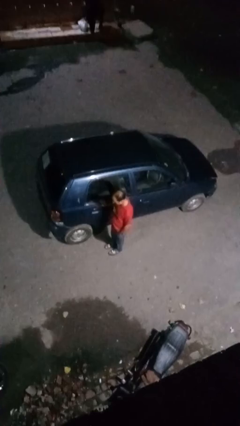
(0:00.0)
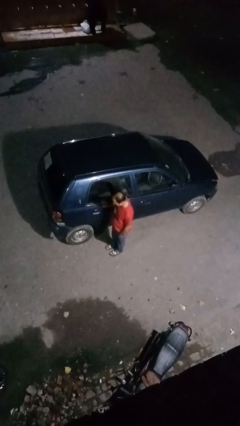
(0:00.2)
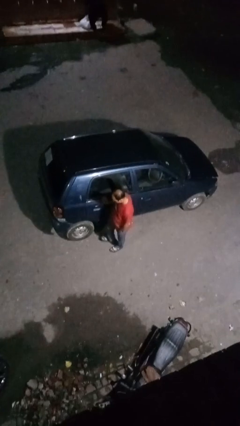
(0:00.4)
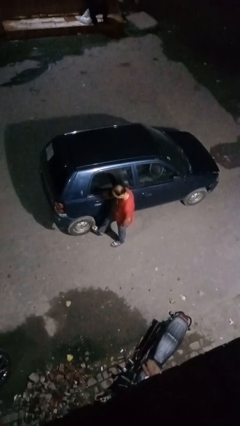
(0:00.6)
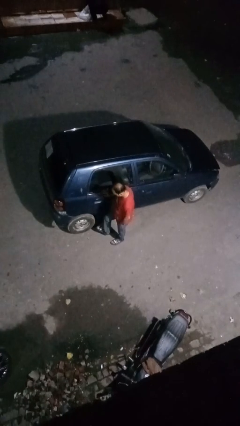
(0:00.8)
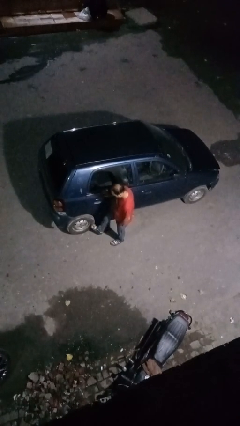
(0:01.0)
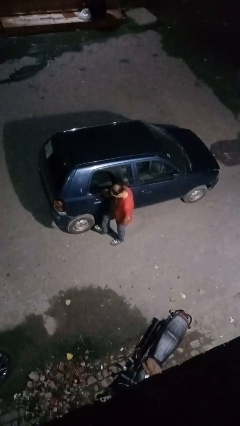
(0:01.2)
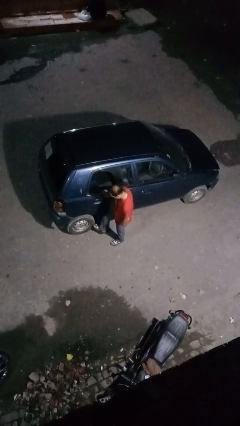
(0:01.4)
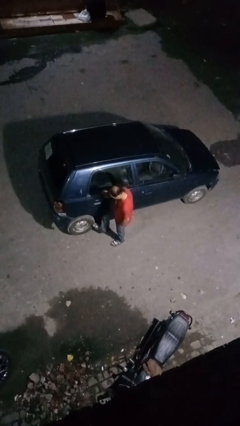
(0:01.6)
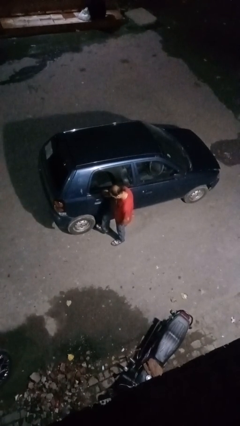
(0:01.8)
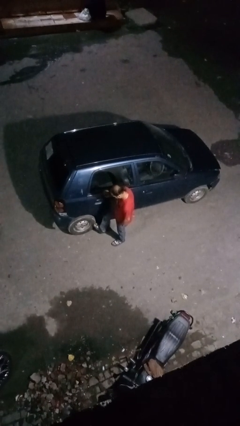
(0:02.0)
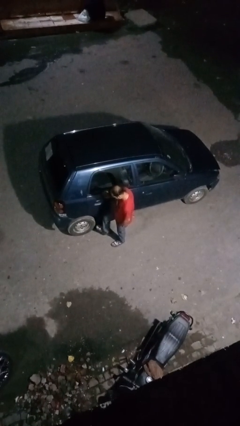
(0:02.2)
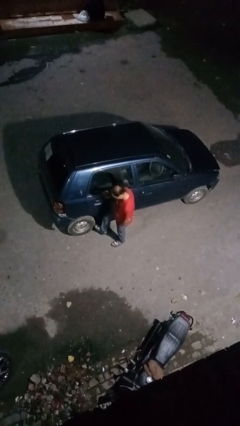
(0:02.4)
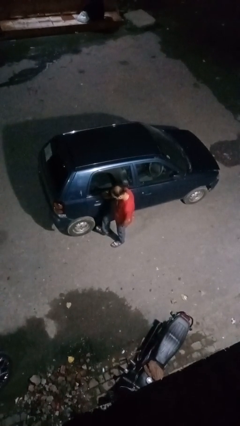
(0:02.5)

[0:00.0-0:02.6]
person kicks car tires

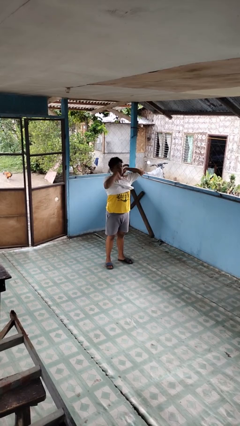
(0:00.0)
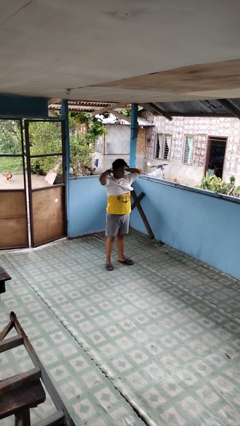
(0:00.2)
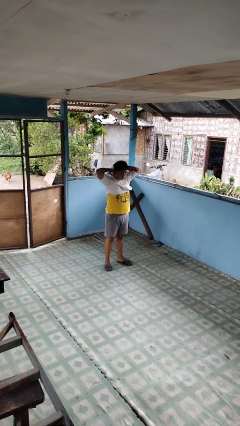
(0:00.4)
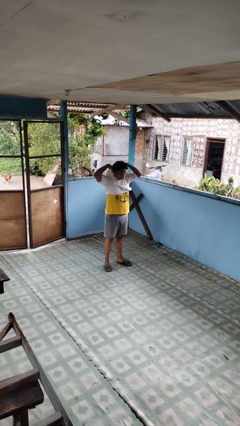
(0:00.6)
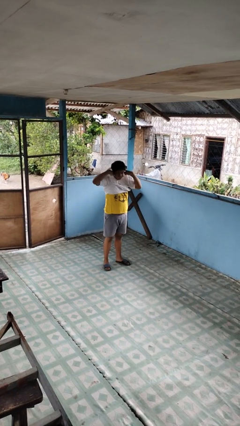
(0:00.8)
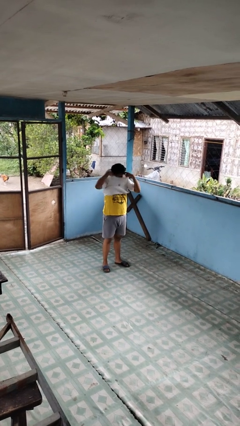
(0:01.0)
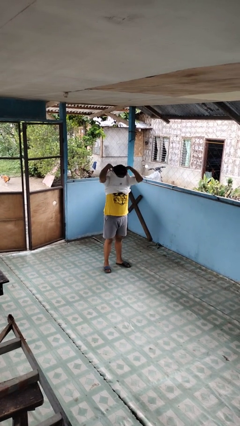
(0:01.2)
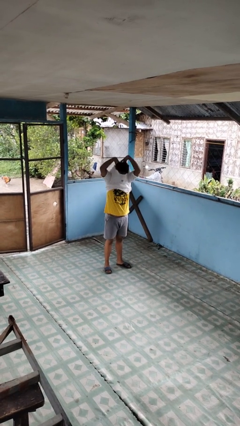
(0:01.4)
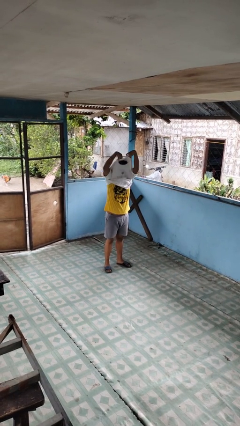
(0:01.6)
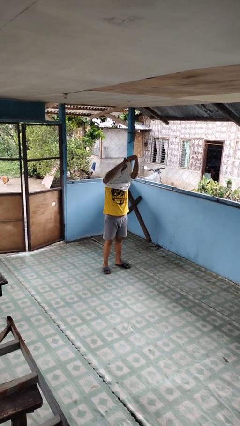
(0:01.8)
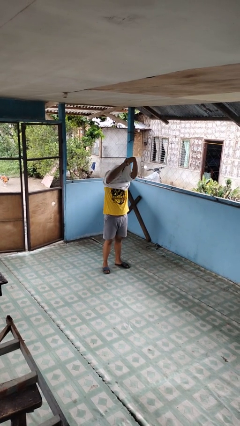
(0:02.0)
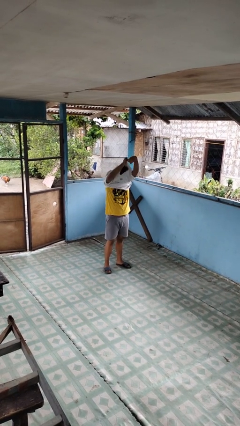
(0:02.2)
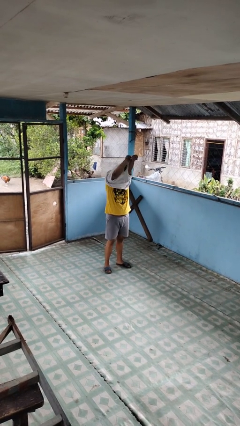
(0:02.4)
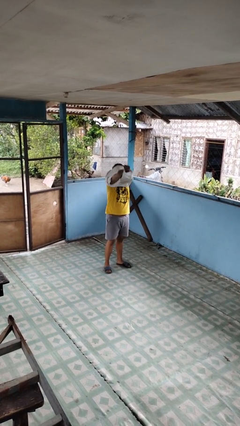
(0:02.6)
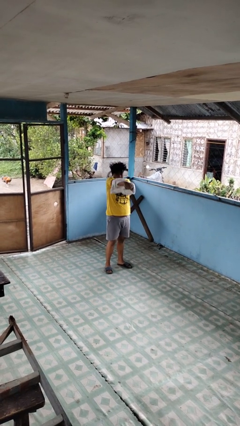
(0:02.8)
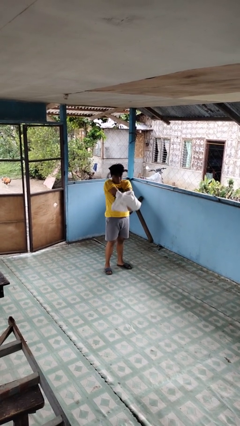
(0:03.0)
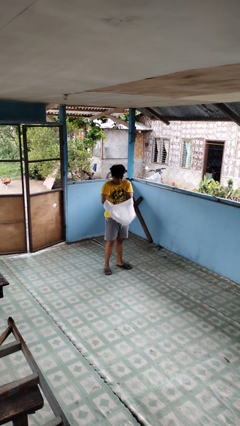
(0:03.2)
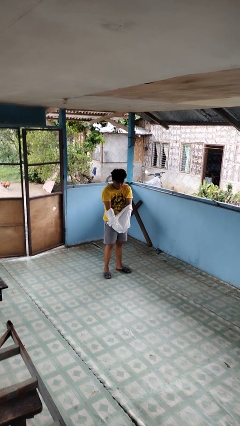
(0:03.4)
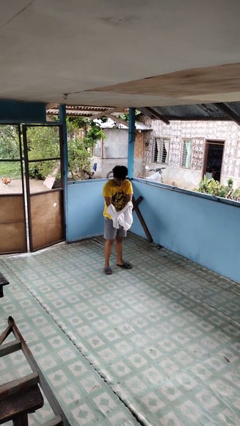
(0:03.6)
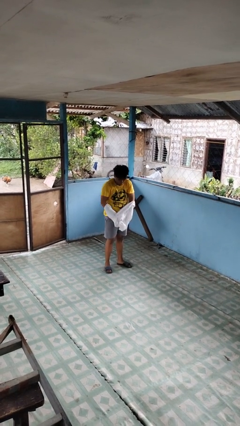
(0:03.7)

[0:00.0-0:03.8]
person takes off shirt

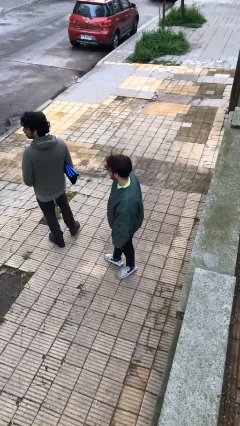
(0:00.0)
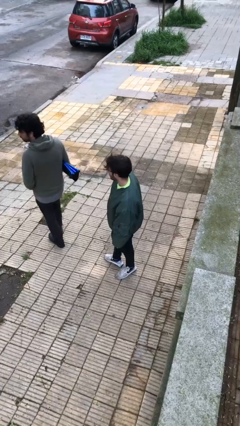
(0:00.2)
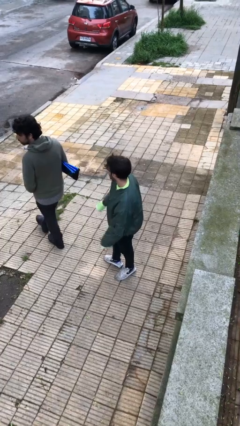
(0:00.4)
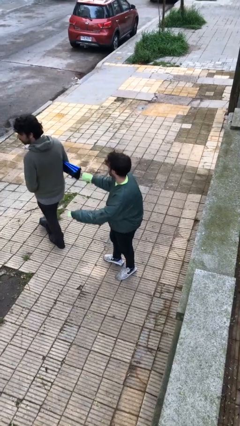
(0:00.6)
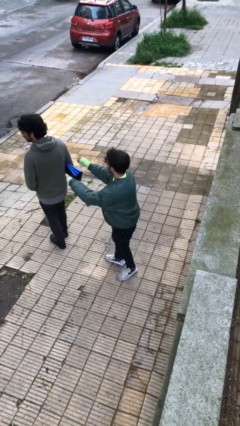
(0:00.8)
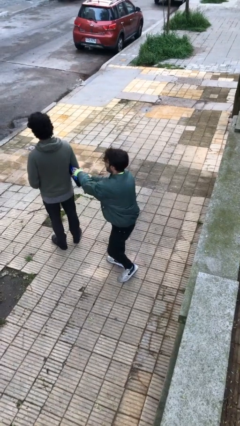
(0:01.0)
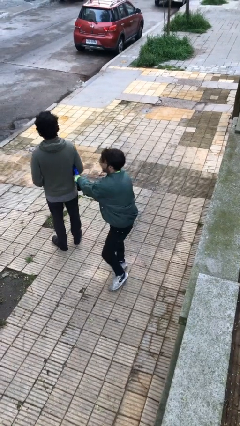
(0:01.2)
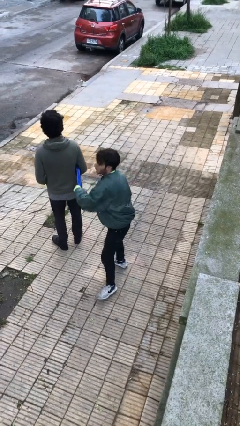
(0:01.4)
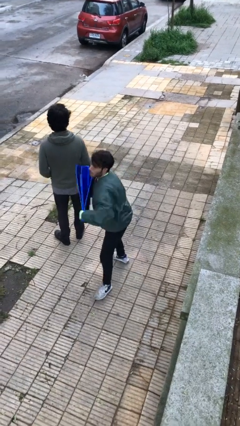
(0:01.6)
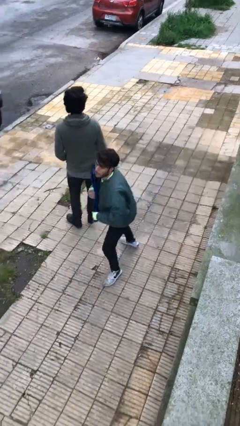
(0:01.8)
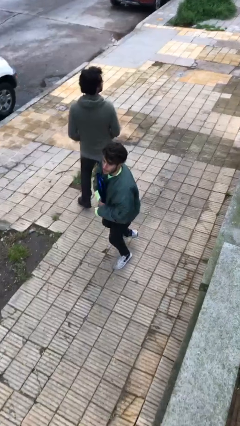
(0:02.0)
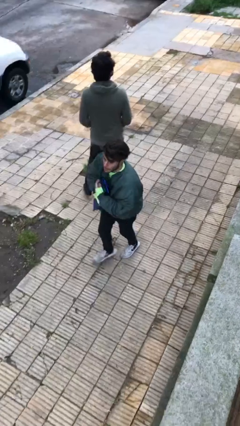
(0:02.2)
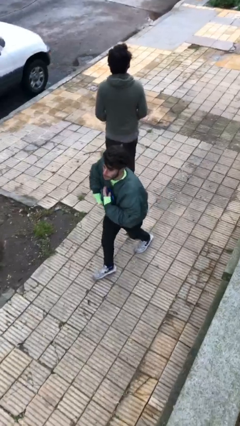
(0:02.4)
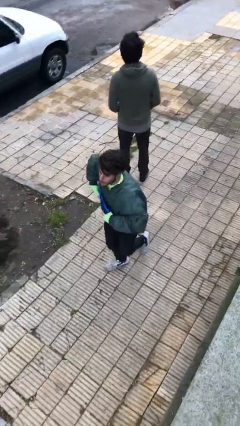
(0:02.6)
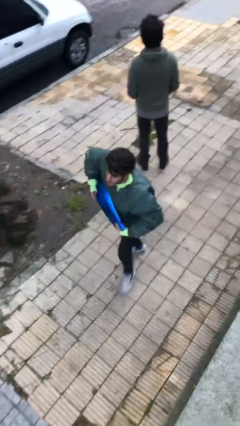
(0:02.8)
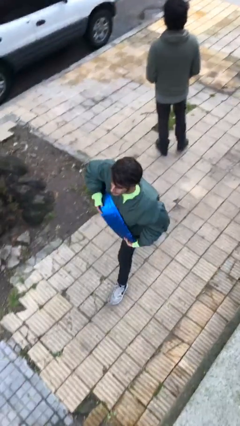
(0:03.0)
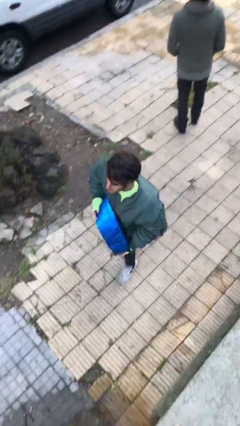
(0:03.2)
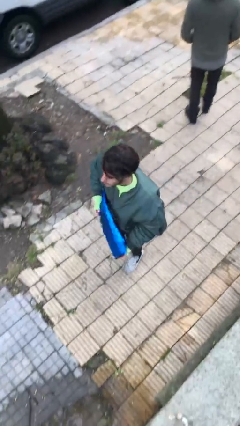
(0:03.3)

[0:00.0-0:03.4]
person steals object from person

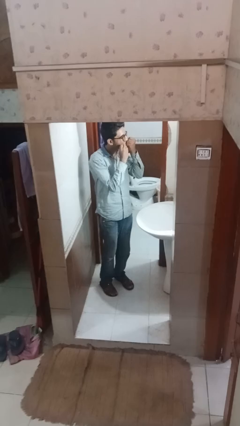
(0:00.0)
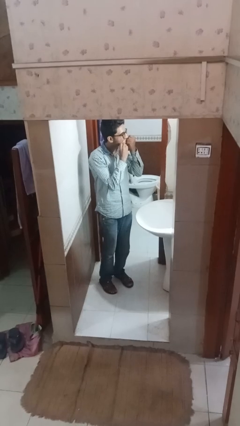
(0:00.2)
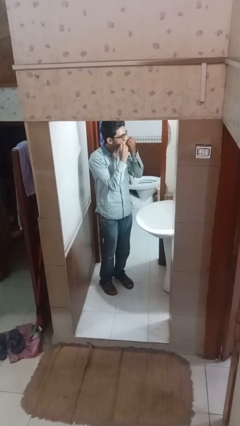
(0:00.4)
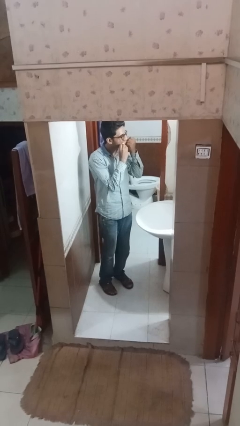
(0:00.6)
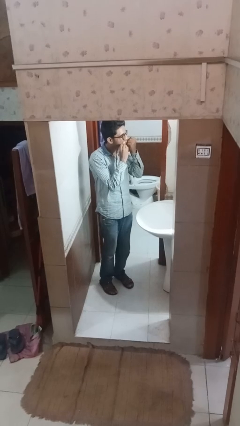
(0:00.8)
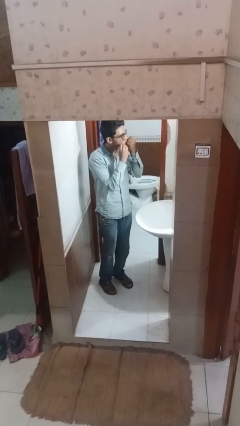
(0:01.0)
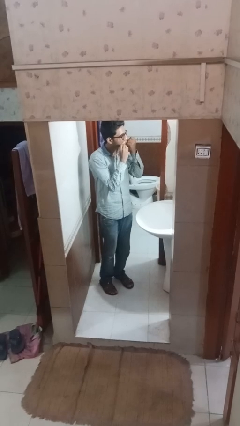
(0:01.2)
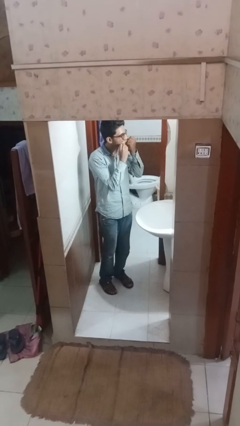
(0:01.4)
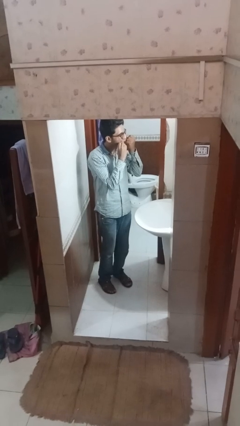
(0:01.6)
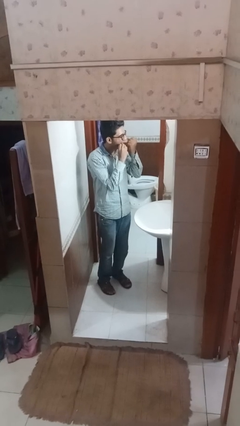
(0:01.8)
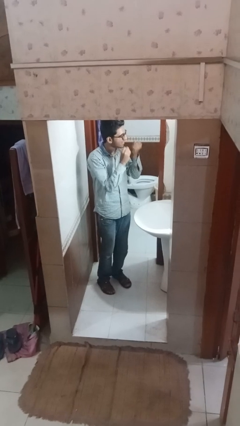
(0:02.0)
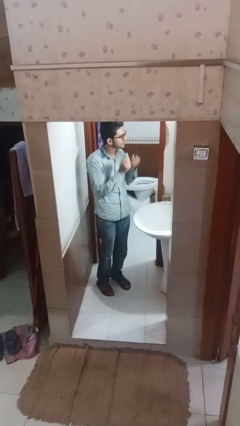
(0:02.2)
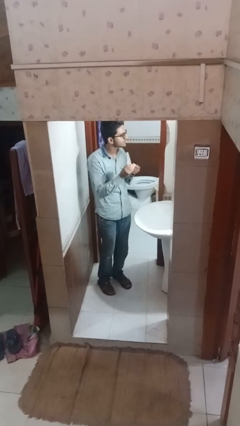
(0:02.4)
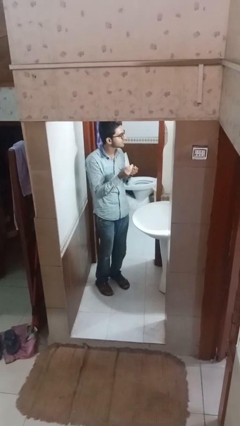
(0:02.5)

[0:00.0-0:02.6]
person flosses

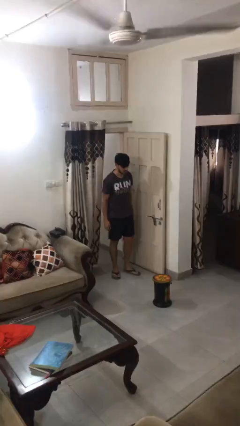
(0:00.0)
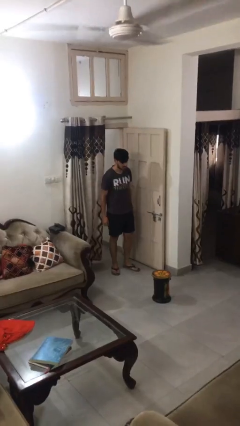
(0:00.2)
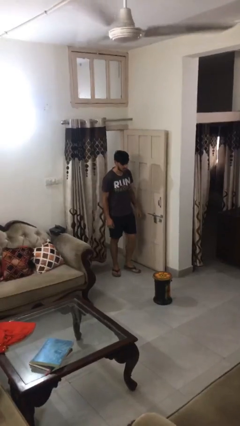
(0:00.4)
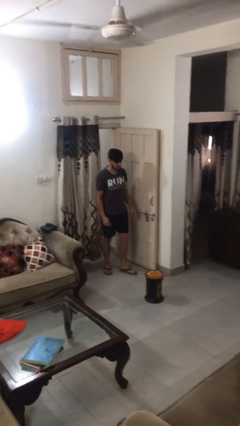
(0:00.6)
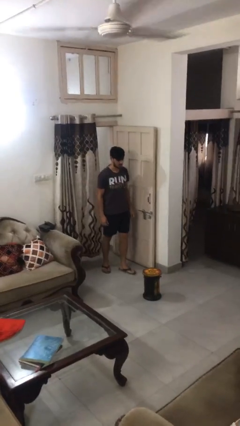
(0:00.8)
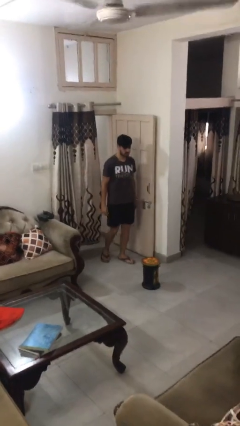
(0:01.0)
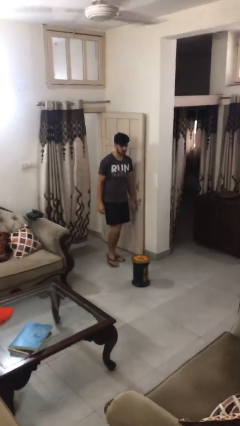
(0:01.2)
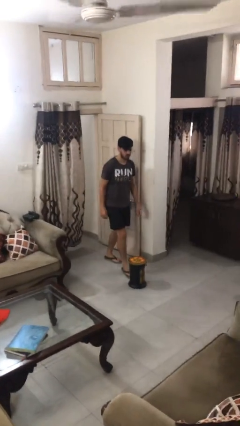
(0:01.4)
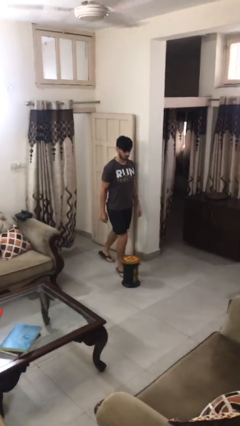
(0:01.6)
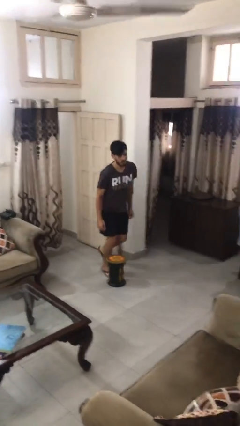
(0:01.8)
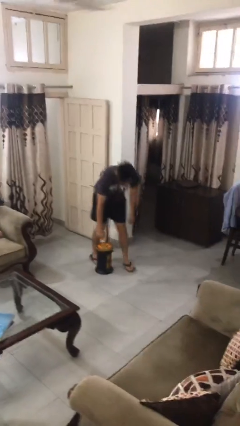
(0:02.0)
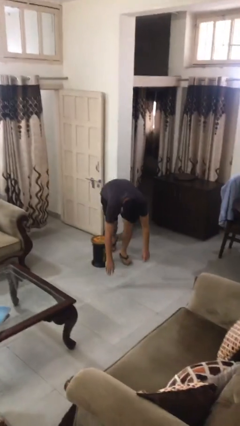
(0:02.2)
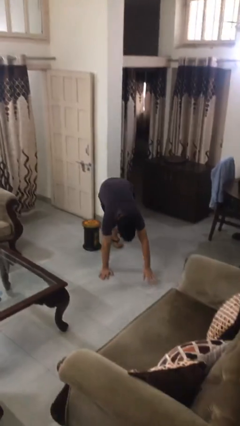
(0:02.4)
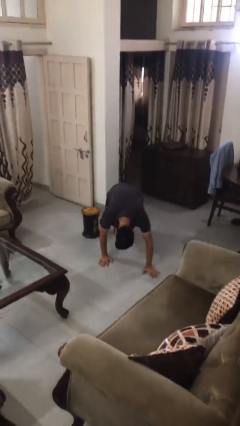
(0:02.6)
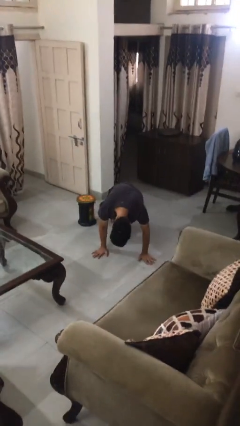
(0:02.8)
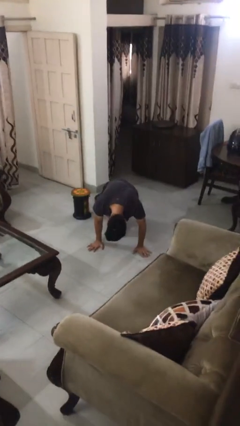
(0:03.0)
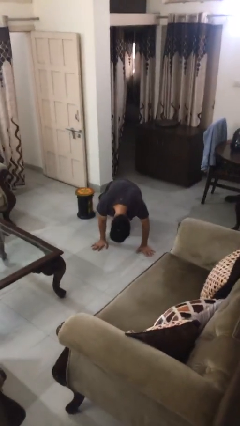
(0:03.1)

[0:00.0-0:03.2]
person trips on object on floor

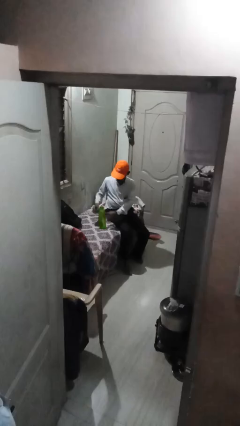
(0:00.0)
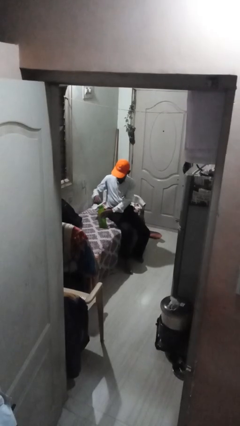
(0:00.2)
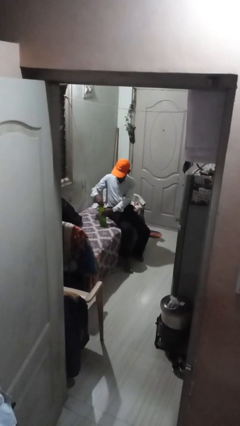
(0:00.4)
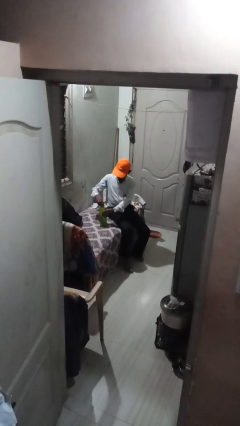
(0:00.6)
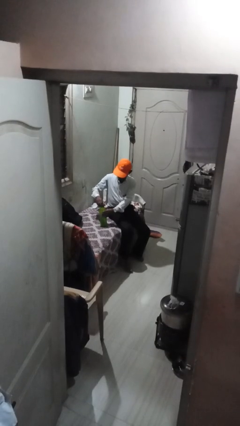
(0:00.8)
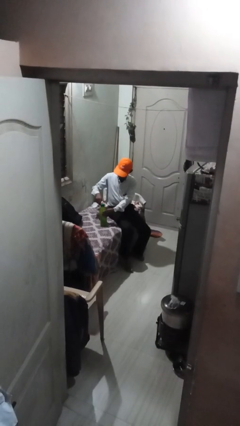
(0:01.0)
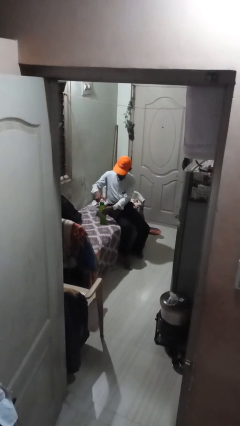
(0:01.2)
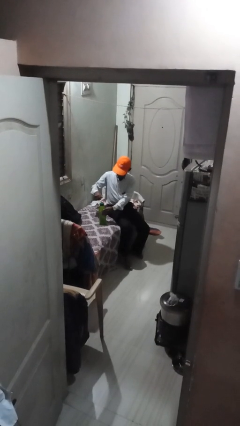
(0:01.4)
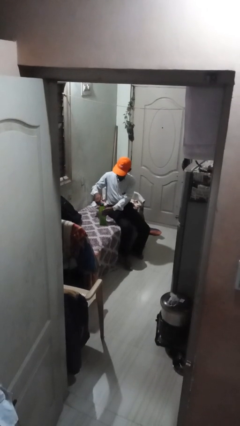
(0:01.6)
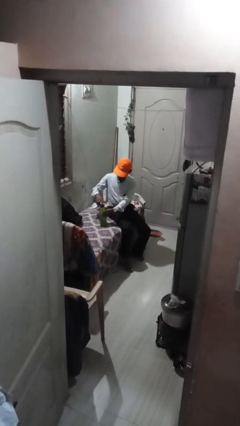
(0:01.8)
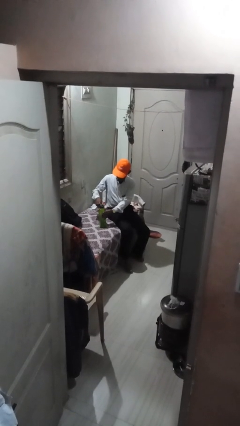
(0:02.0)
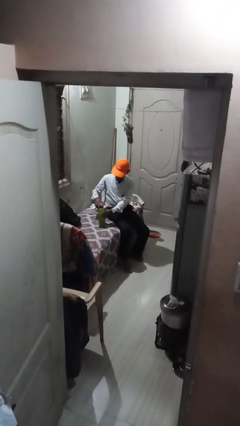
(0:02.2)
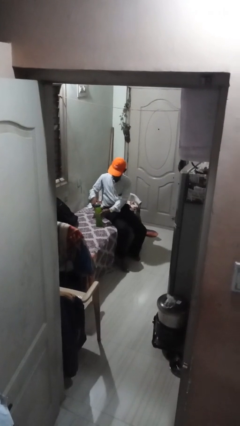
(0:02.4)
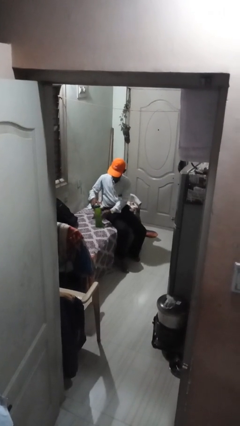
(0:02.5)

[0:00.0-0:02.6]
person screws lid to bottle
